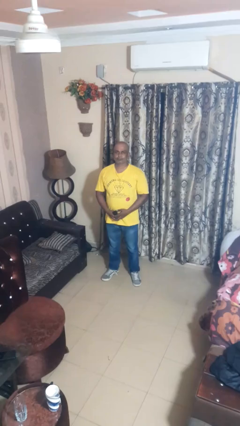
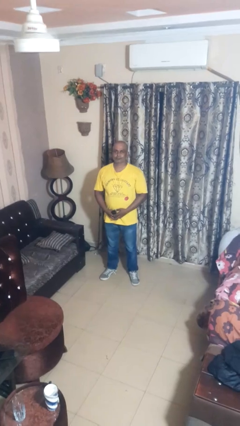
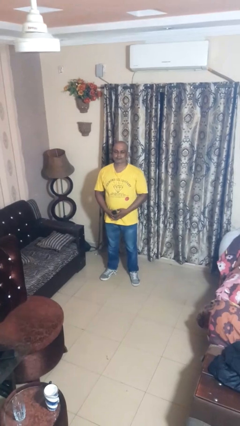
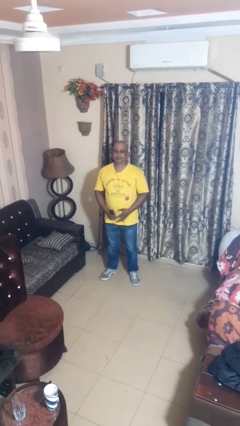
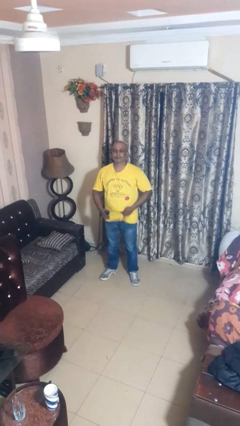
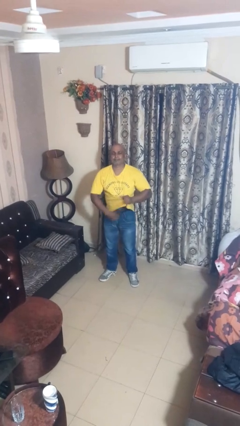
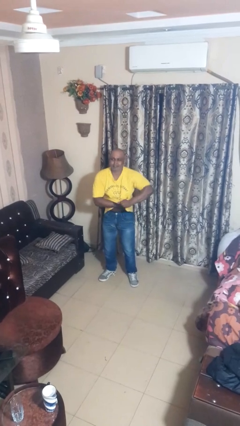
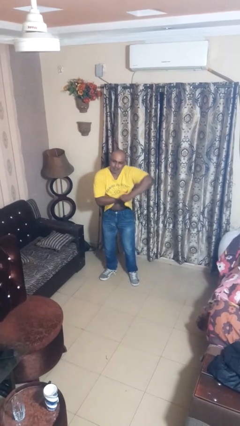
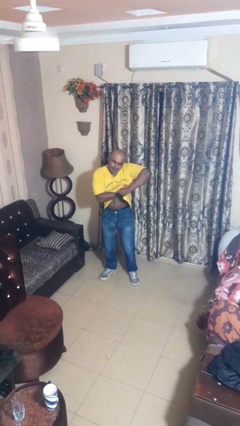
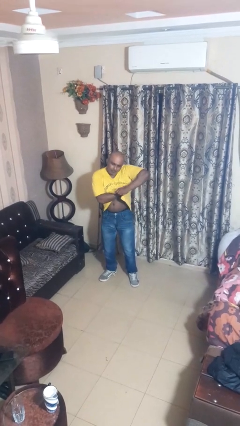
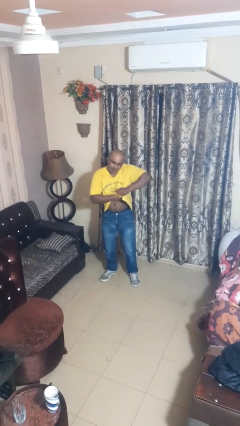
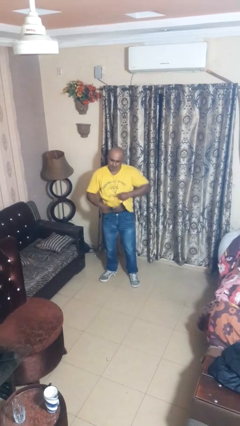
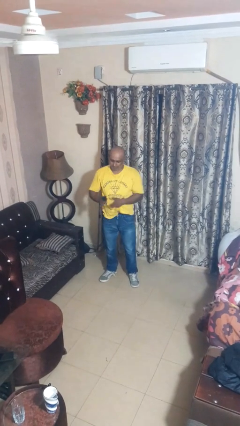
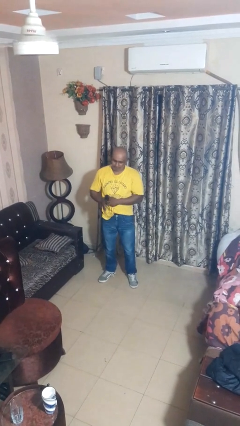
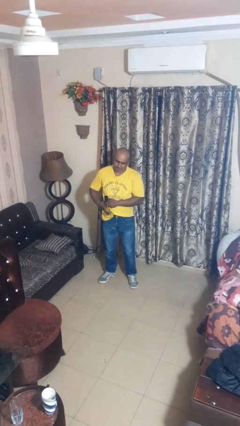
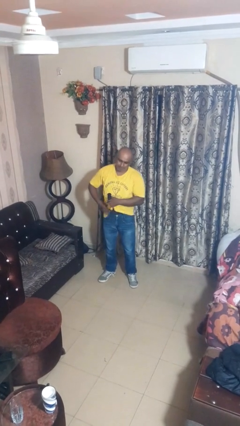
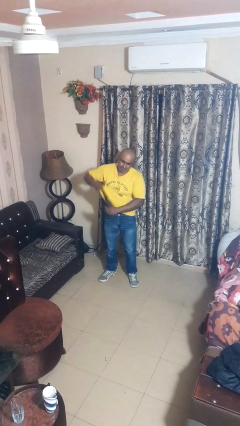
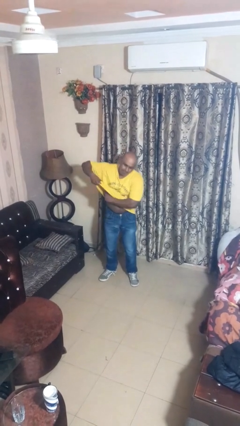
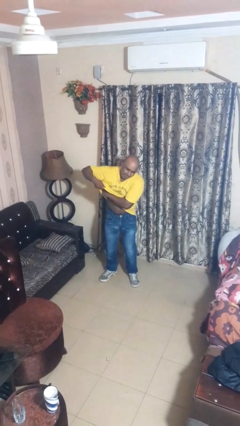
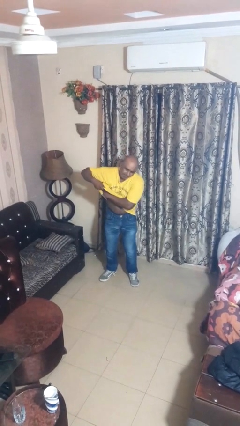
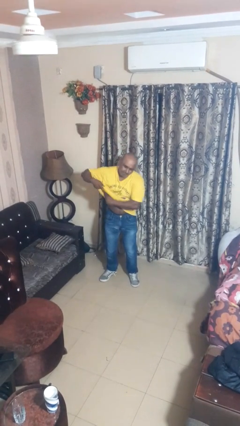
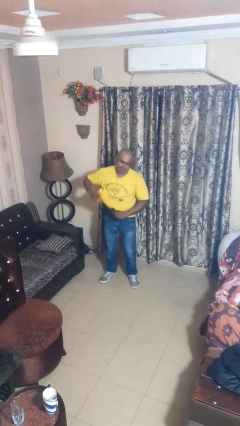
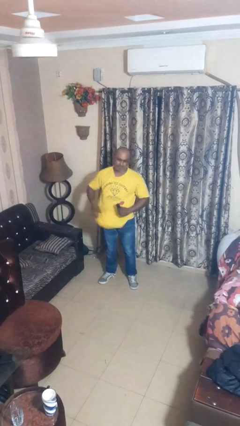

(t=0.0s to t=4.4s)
person applies deodorant

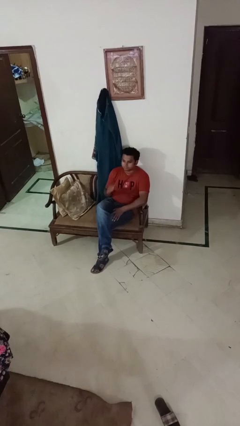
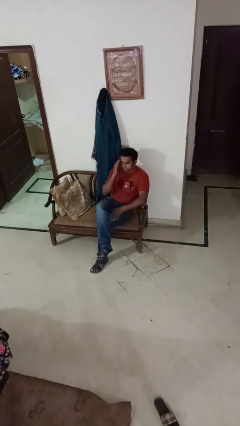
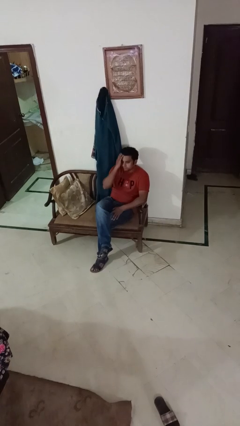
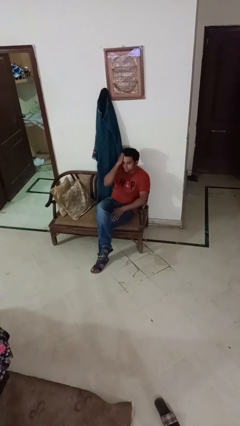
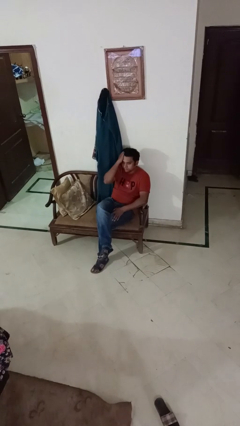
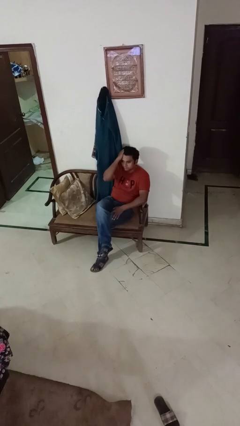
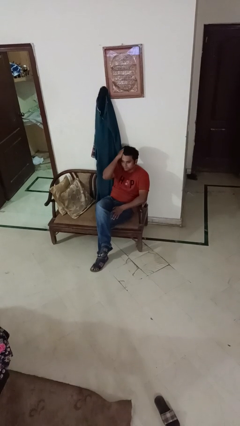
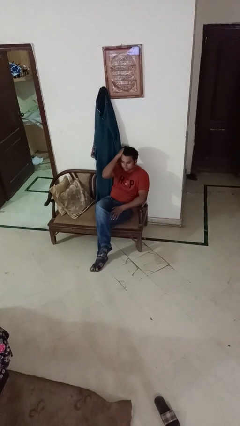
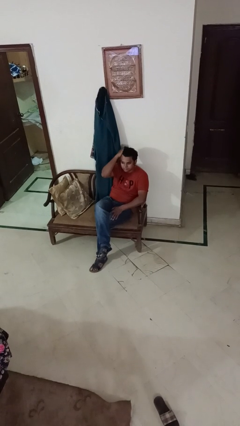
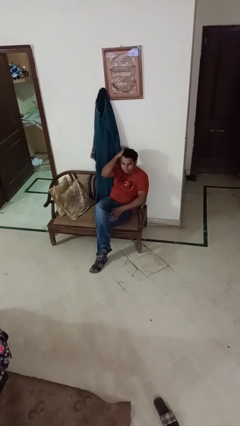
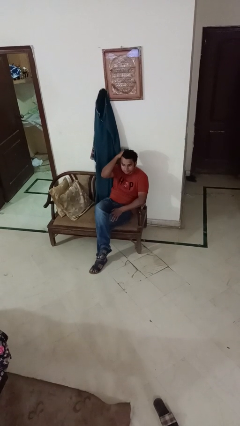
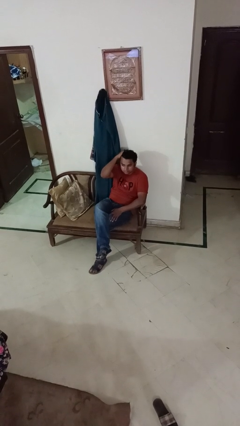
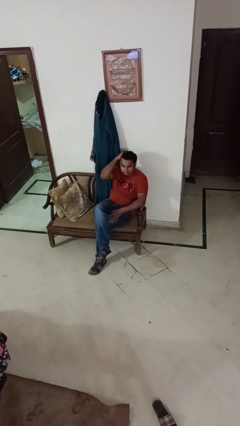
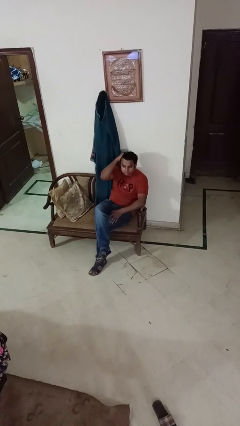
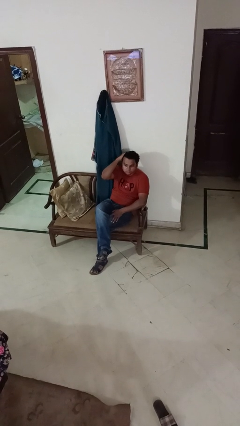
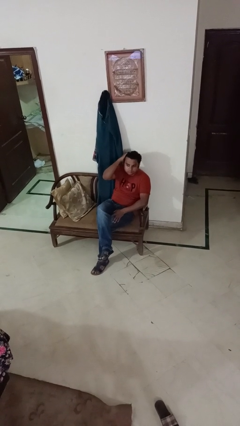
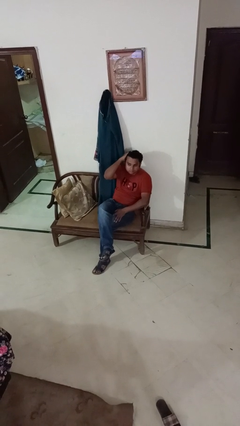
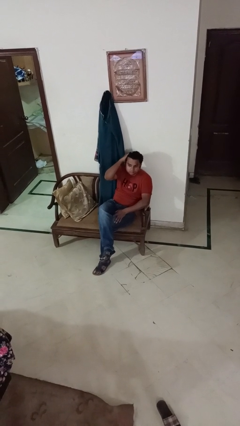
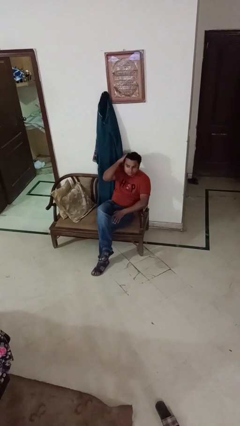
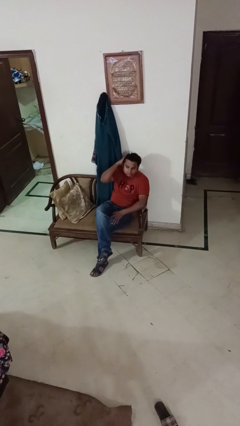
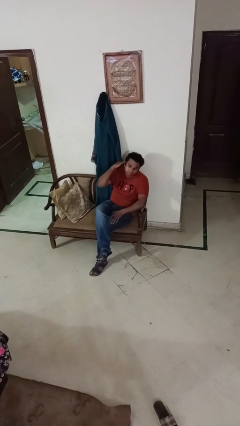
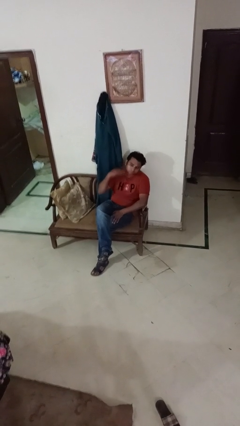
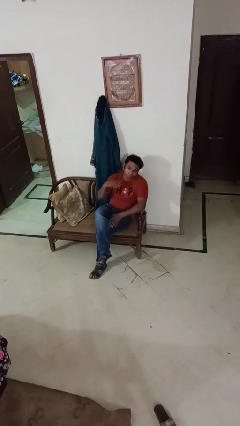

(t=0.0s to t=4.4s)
person strokes hair

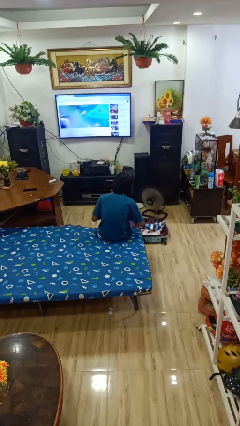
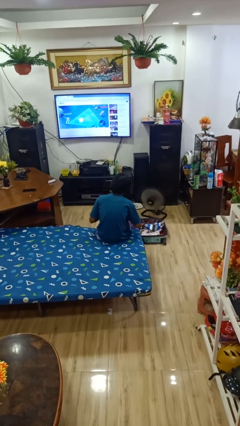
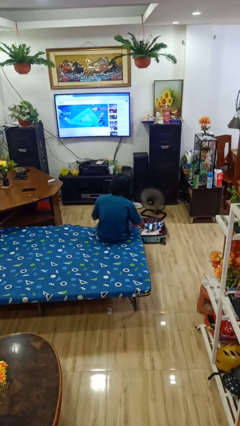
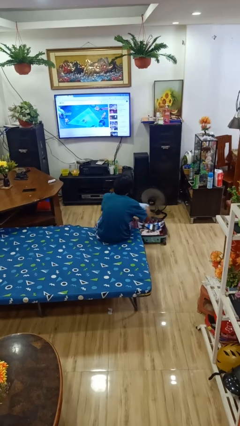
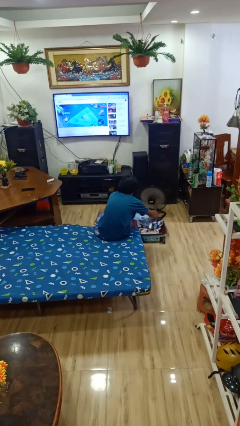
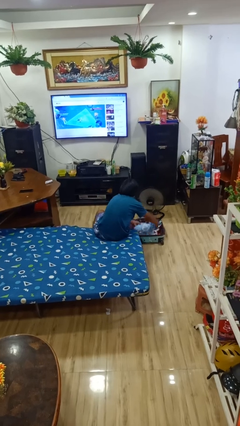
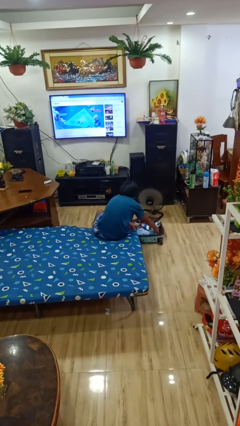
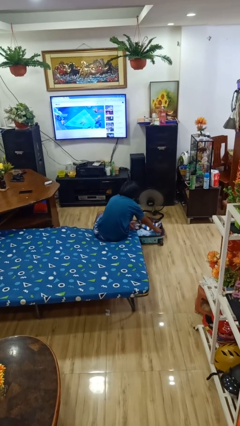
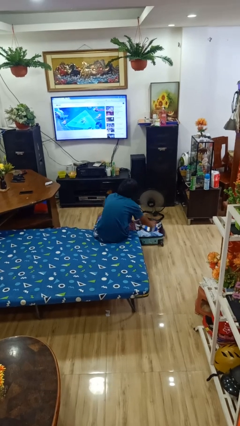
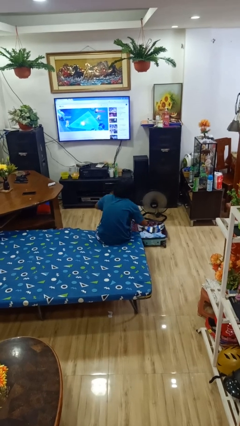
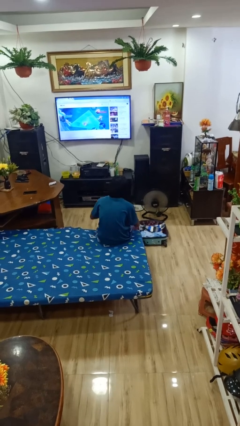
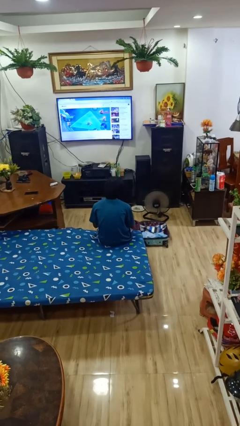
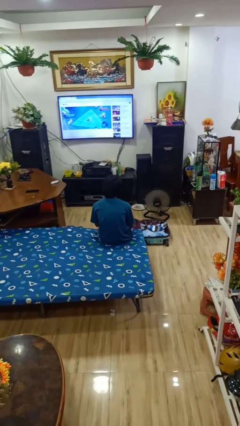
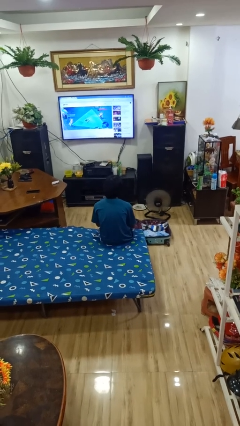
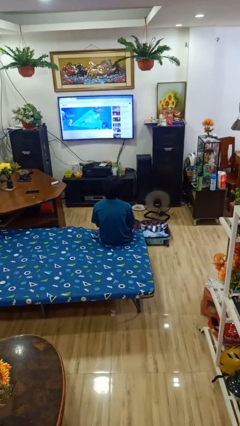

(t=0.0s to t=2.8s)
person loads clothes into suitcase

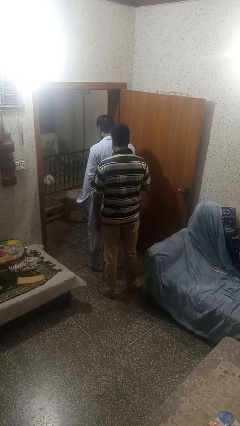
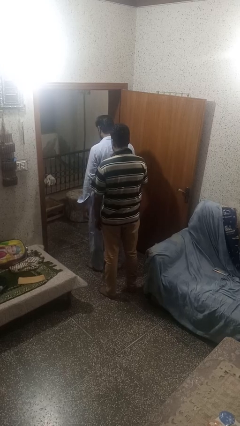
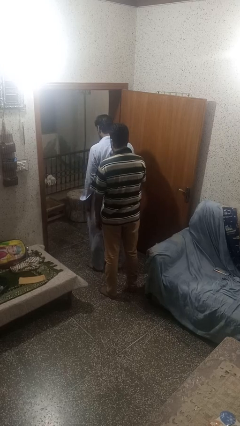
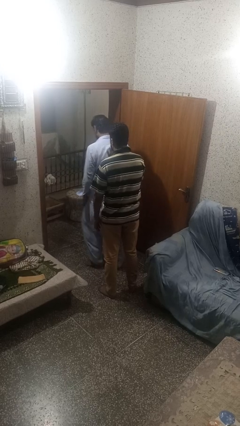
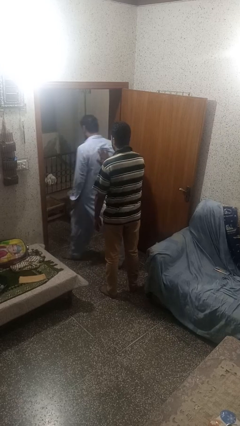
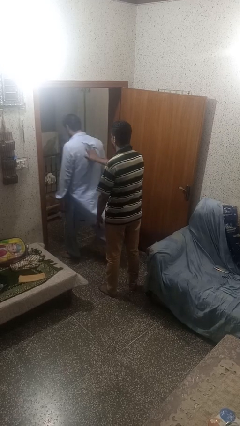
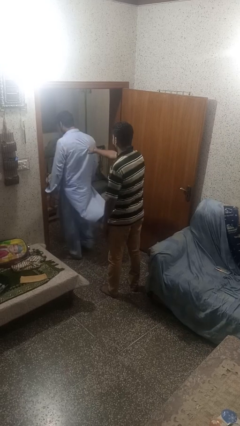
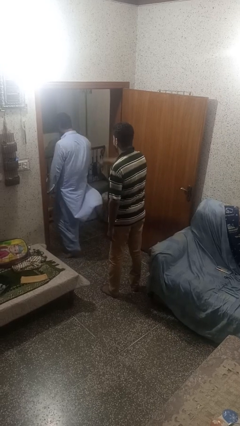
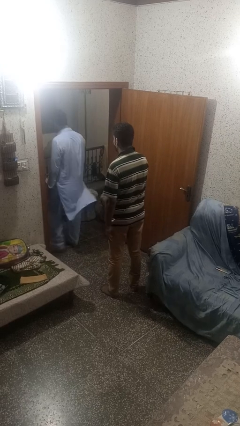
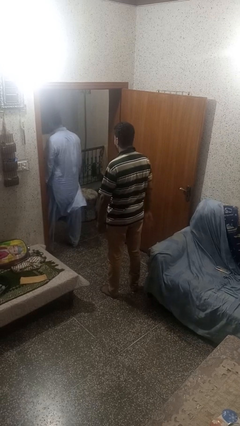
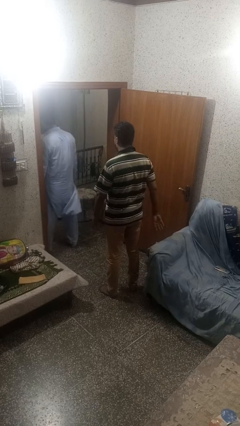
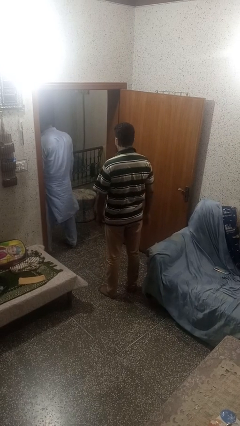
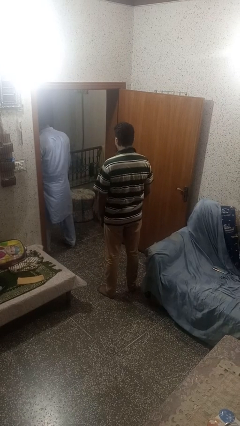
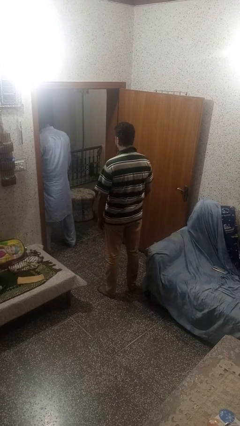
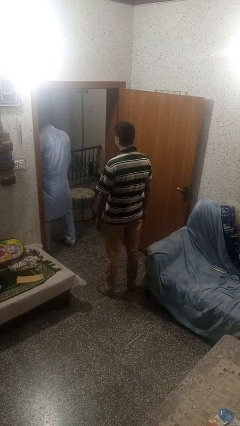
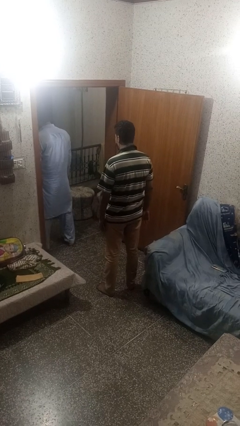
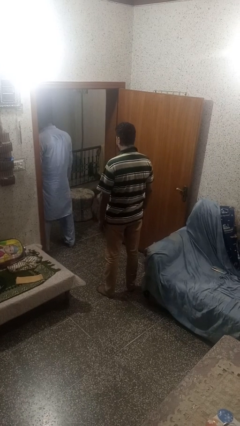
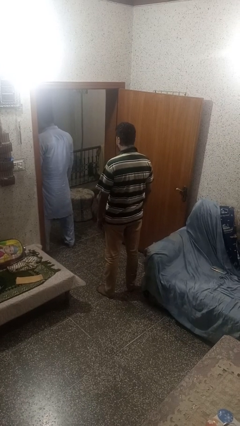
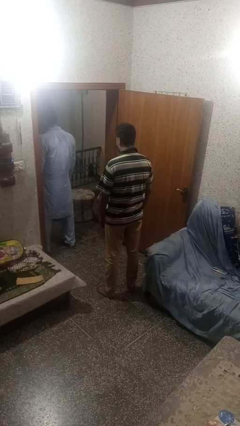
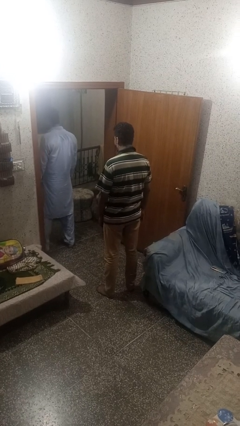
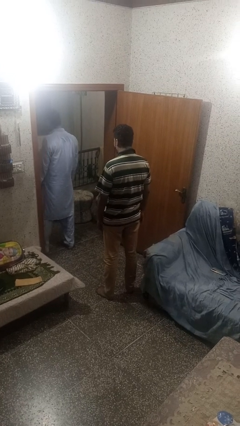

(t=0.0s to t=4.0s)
person shoves person

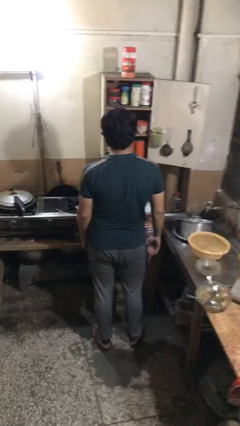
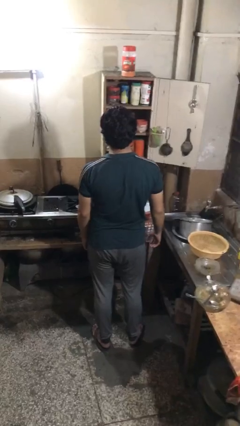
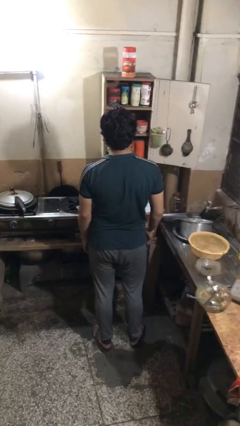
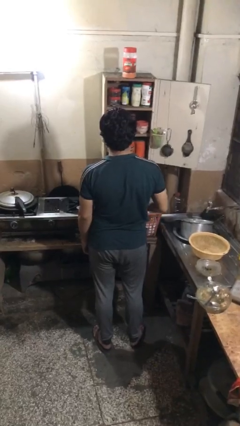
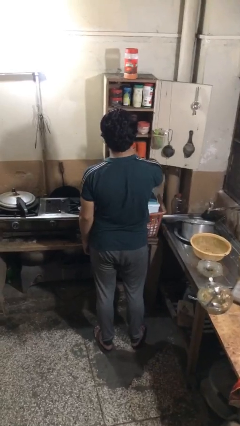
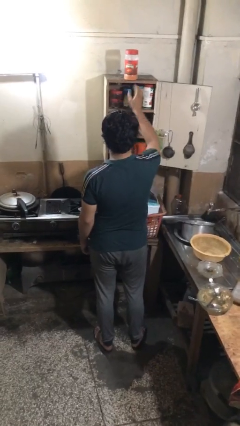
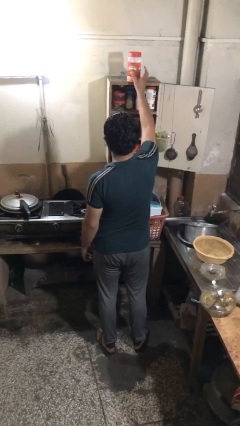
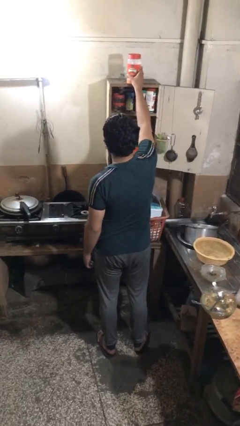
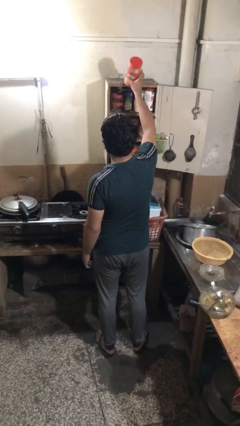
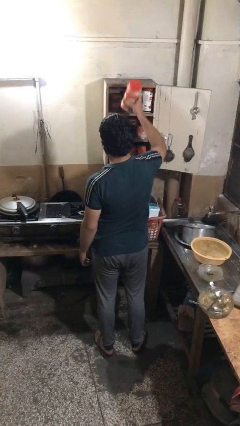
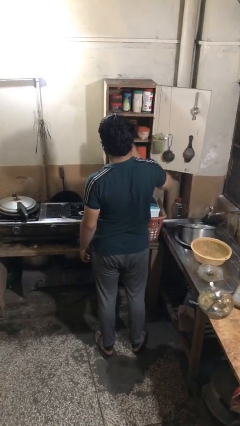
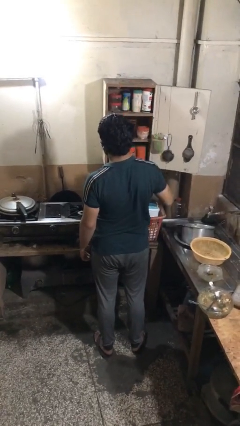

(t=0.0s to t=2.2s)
person puts object in cabinet
